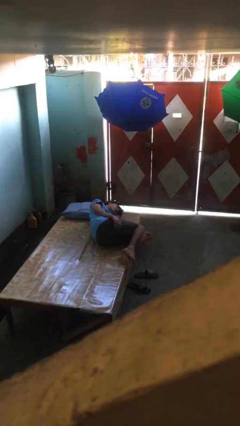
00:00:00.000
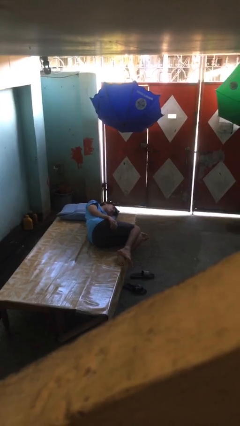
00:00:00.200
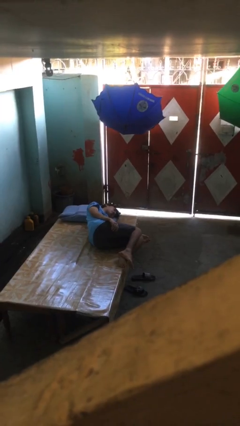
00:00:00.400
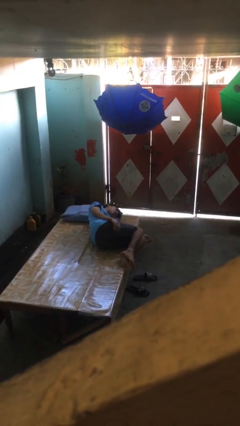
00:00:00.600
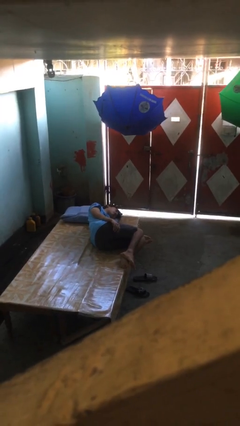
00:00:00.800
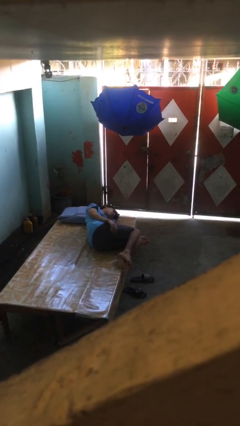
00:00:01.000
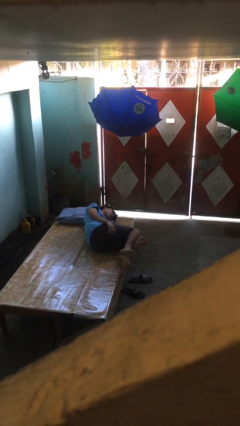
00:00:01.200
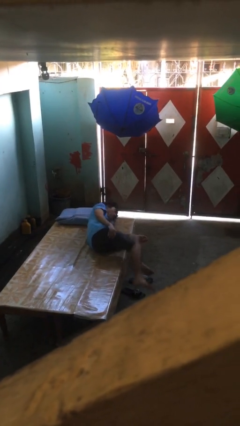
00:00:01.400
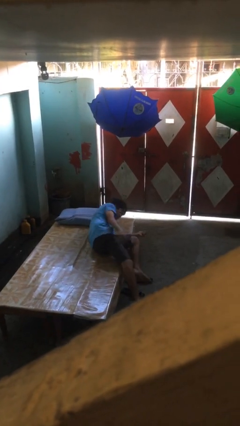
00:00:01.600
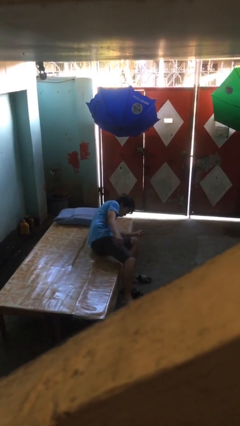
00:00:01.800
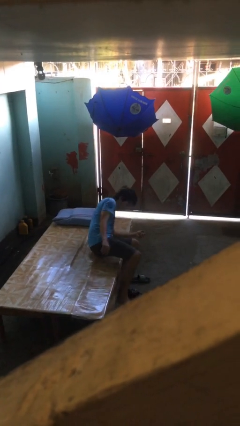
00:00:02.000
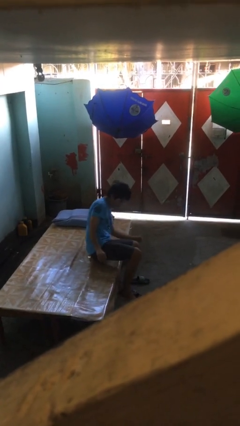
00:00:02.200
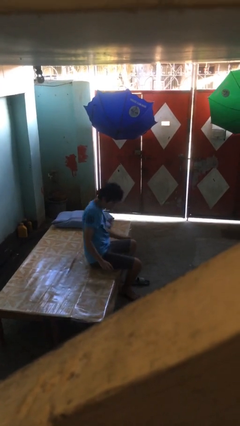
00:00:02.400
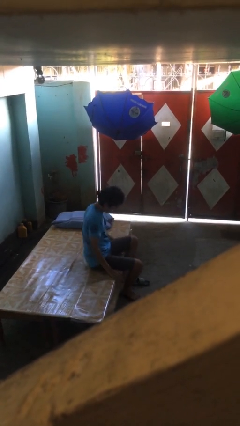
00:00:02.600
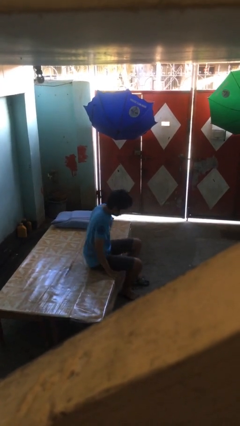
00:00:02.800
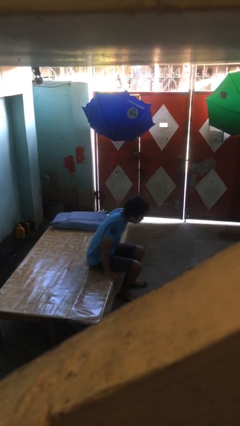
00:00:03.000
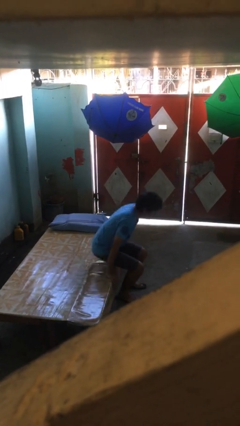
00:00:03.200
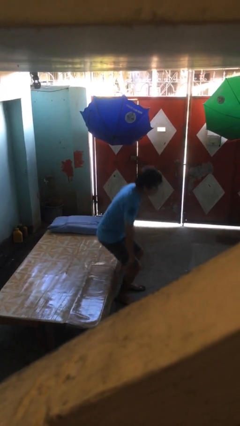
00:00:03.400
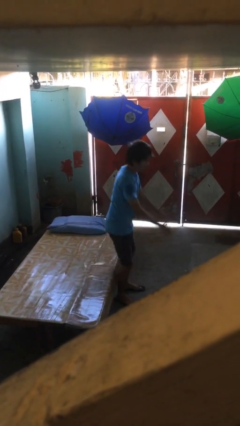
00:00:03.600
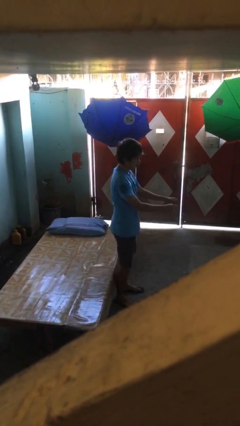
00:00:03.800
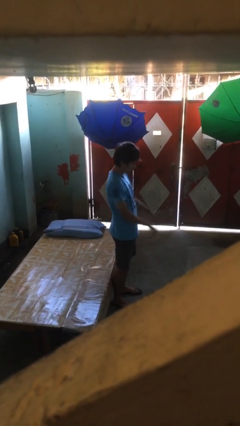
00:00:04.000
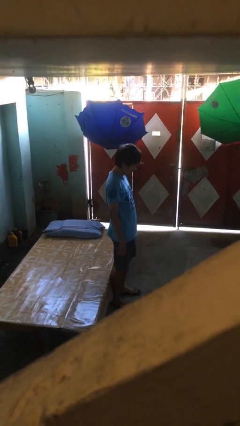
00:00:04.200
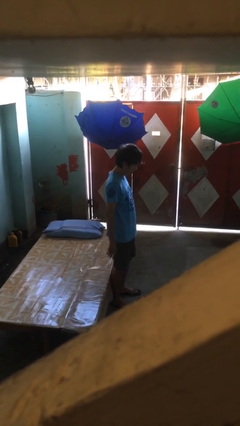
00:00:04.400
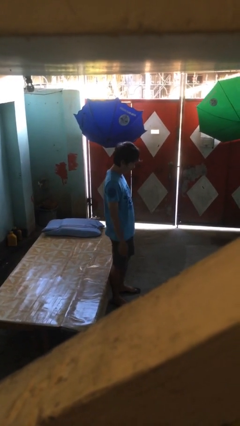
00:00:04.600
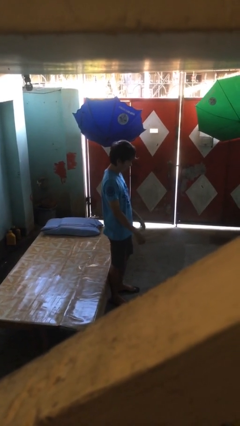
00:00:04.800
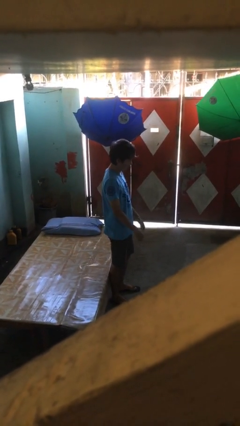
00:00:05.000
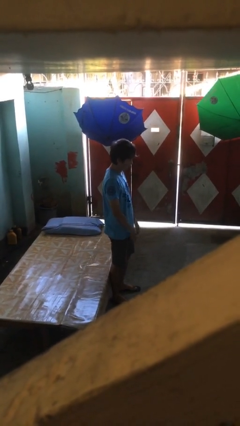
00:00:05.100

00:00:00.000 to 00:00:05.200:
person stands up

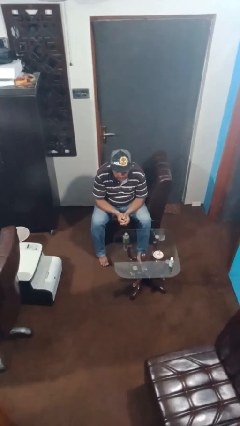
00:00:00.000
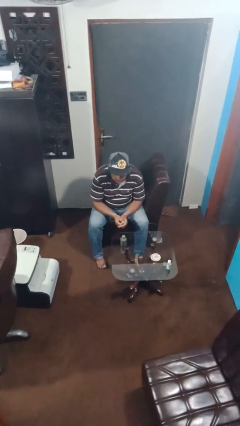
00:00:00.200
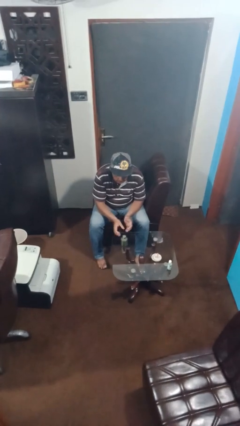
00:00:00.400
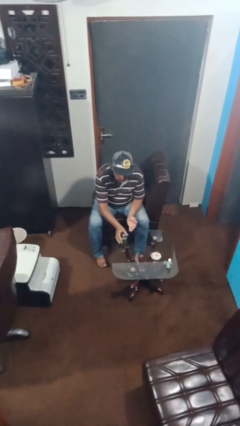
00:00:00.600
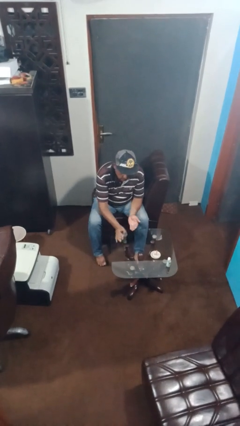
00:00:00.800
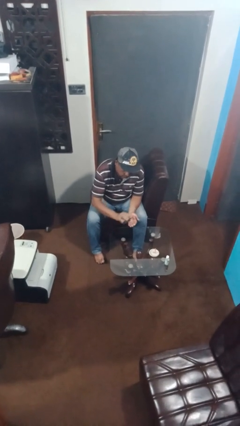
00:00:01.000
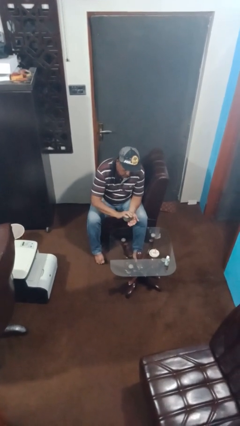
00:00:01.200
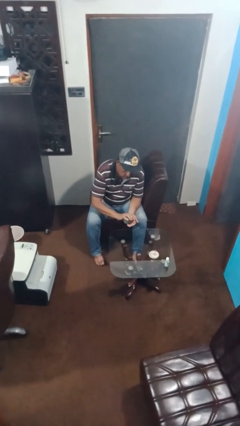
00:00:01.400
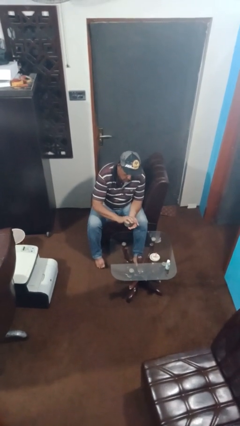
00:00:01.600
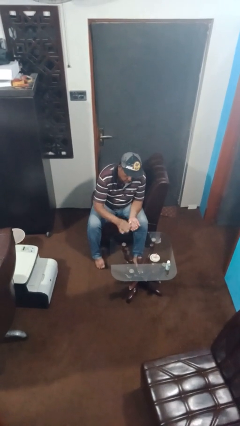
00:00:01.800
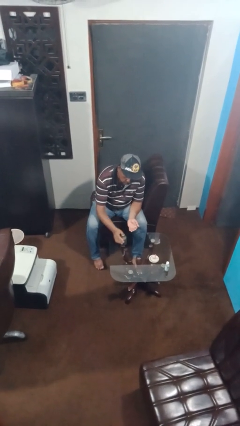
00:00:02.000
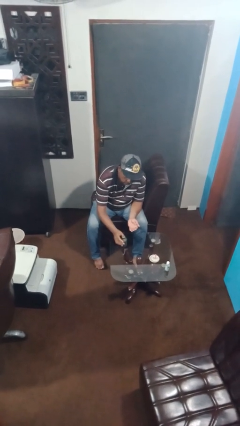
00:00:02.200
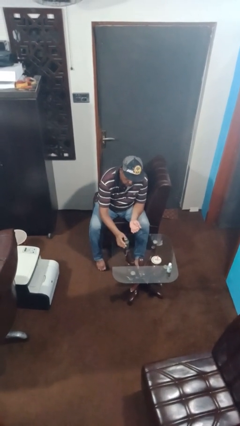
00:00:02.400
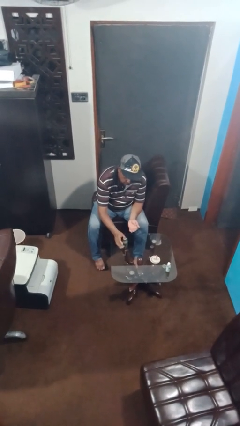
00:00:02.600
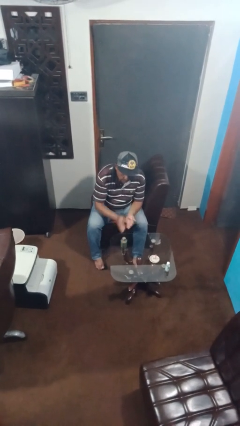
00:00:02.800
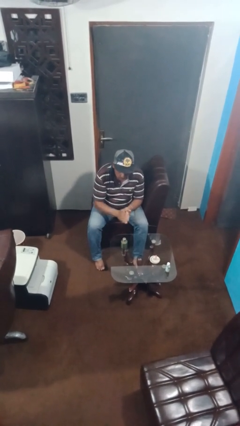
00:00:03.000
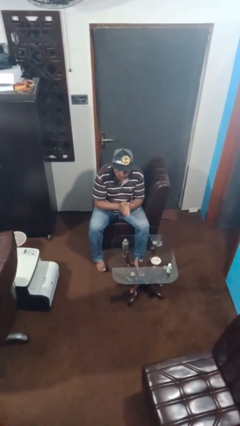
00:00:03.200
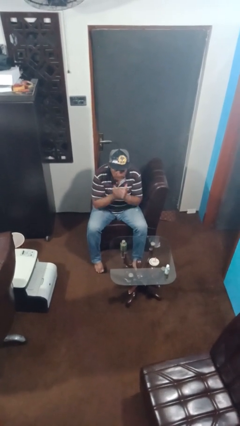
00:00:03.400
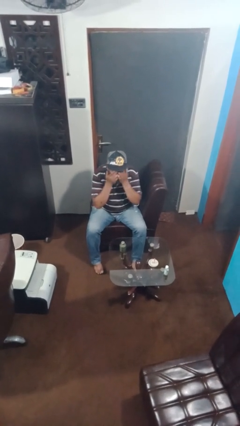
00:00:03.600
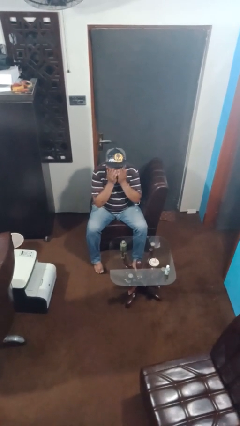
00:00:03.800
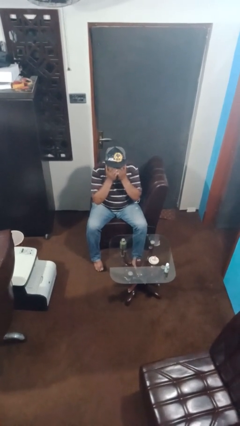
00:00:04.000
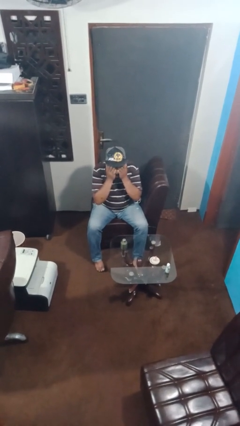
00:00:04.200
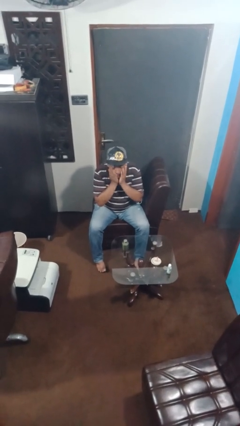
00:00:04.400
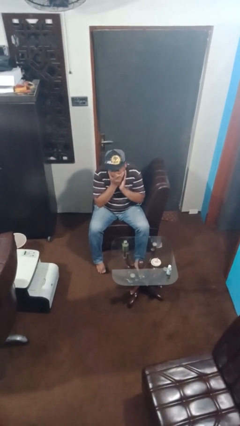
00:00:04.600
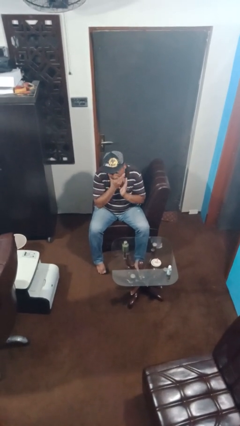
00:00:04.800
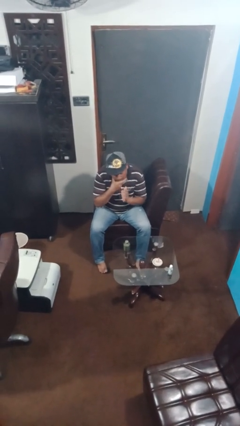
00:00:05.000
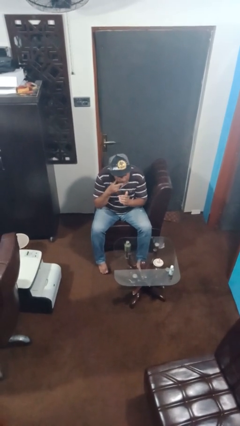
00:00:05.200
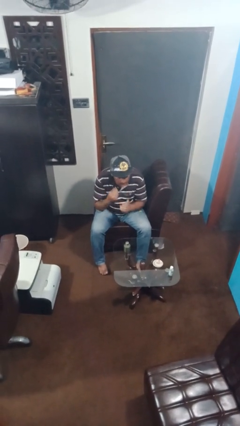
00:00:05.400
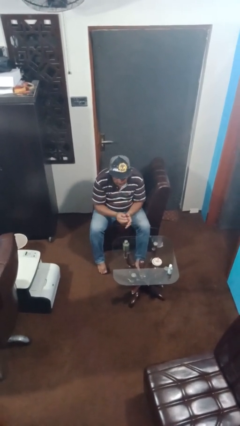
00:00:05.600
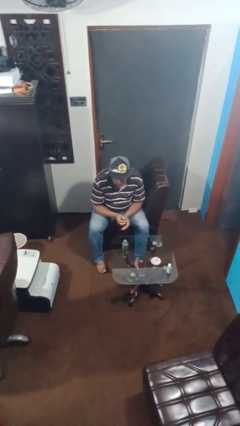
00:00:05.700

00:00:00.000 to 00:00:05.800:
person applies facial moisturizer

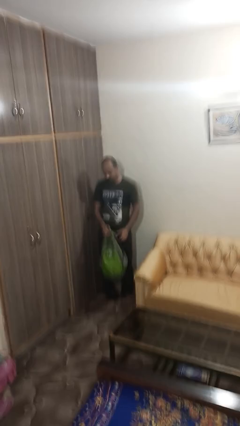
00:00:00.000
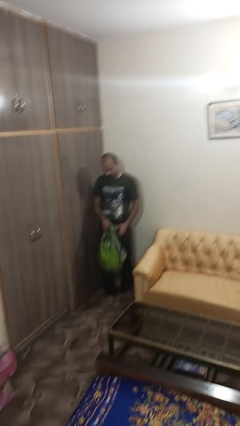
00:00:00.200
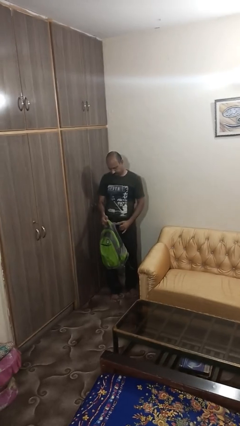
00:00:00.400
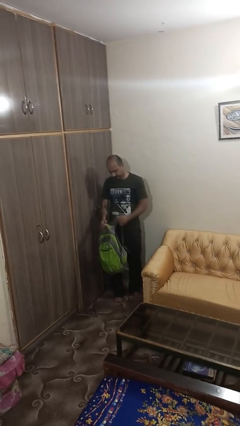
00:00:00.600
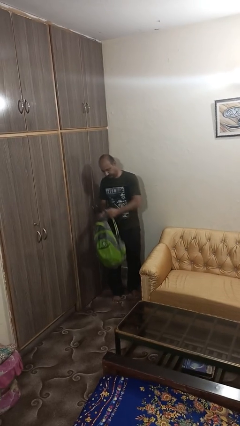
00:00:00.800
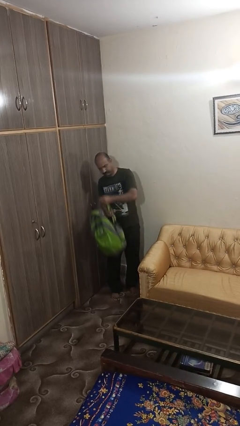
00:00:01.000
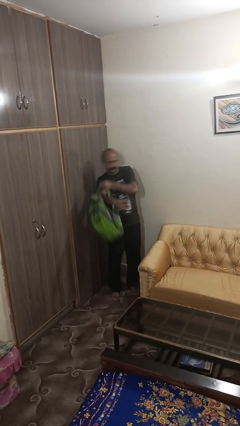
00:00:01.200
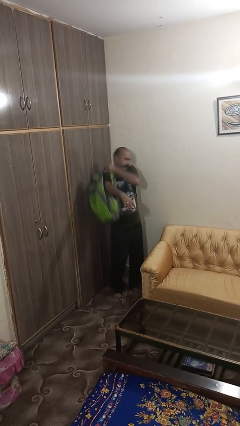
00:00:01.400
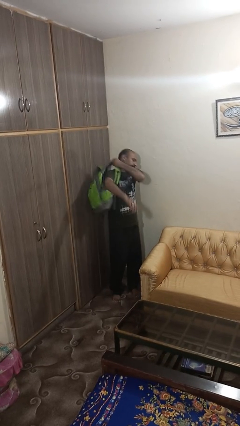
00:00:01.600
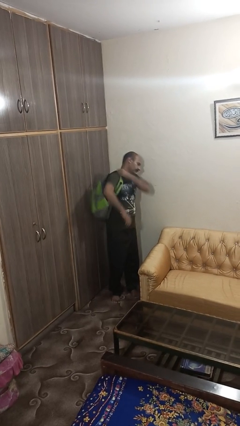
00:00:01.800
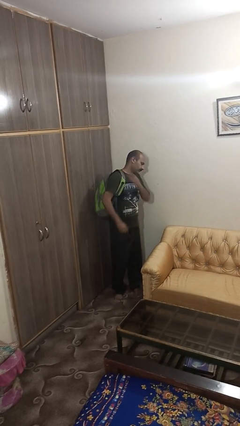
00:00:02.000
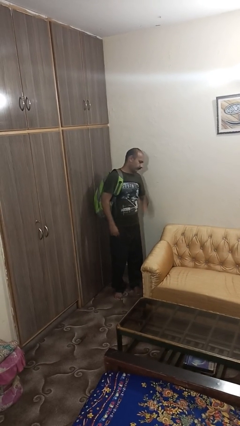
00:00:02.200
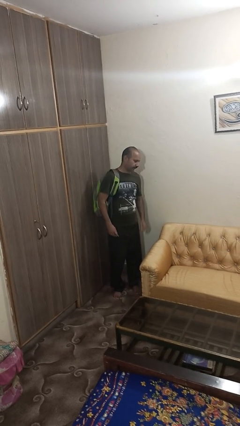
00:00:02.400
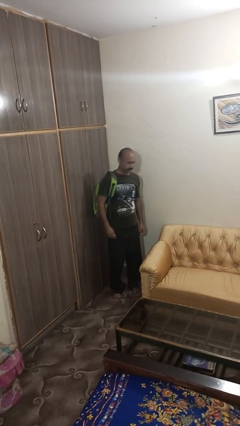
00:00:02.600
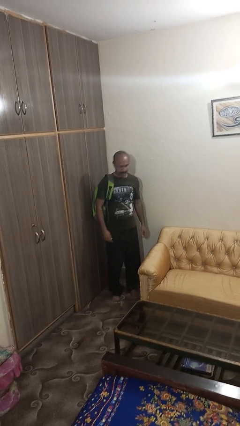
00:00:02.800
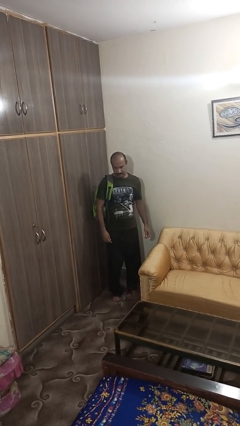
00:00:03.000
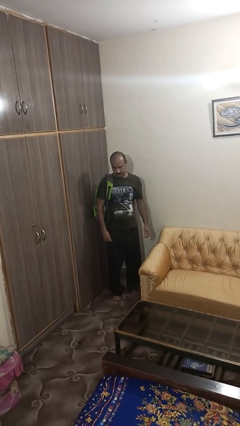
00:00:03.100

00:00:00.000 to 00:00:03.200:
person puts on backpack

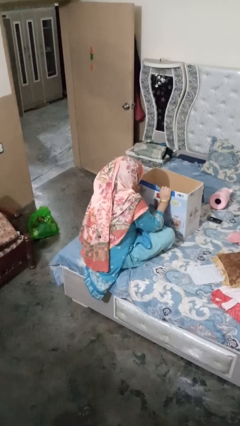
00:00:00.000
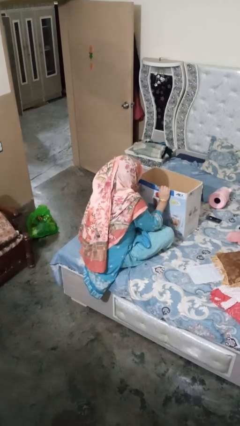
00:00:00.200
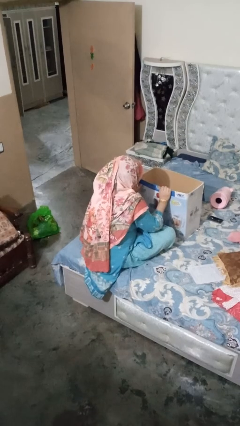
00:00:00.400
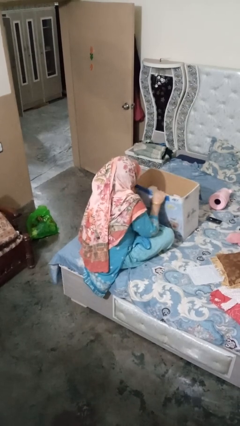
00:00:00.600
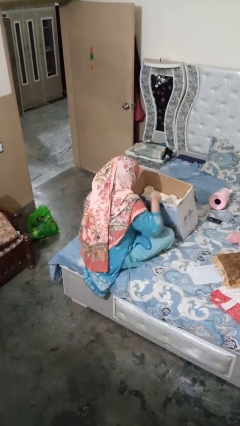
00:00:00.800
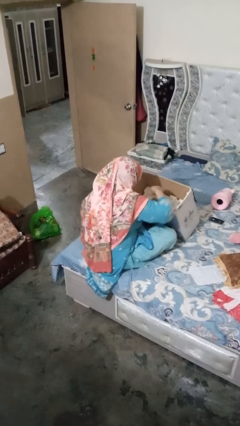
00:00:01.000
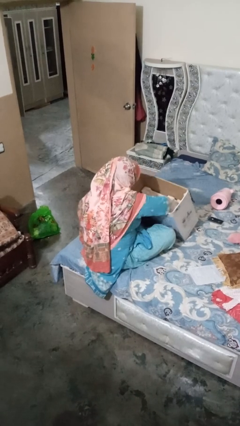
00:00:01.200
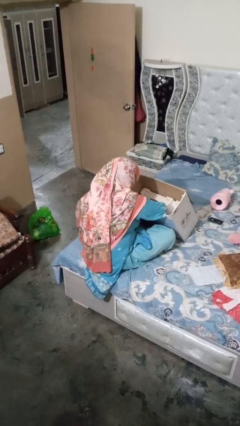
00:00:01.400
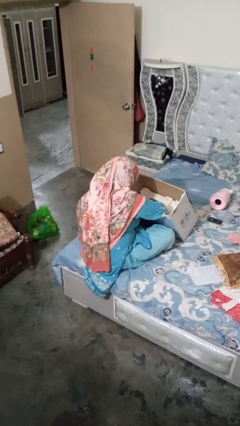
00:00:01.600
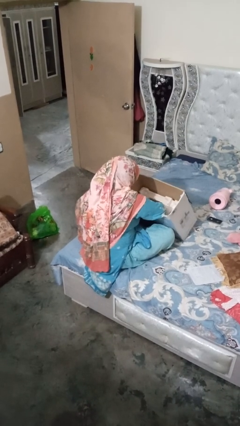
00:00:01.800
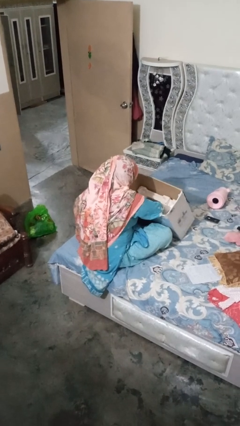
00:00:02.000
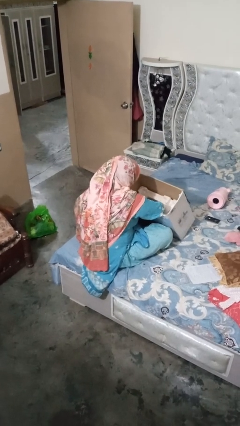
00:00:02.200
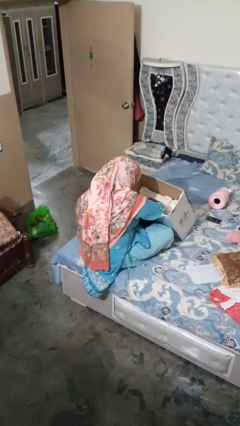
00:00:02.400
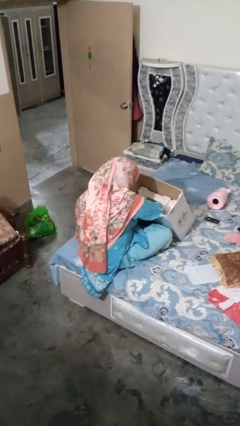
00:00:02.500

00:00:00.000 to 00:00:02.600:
person searches in box

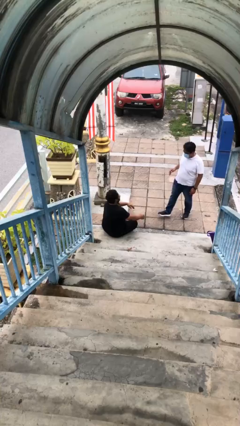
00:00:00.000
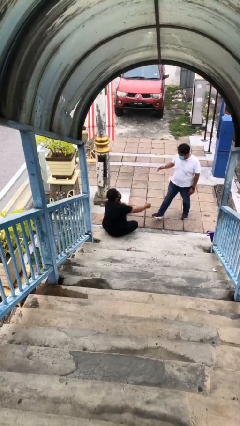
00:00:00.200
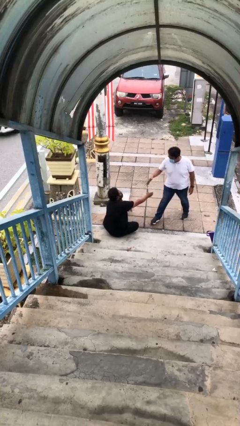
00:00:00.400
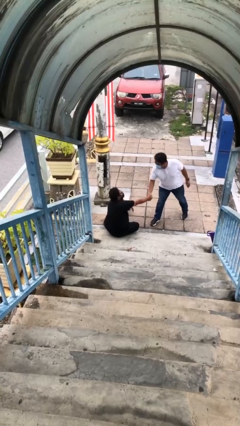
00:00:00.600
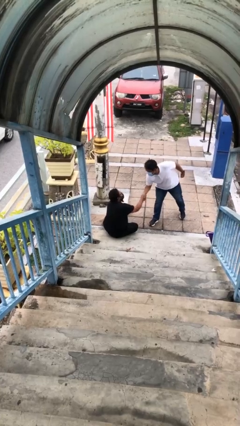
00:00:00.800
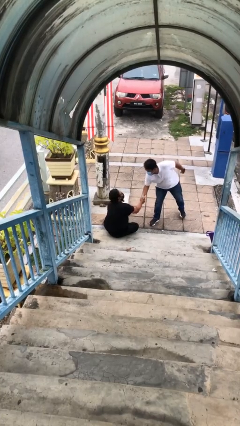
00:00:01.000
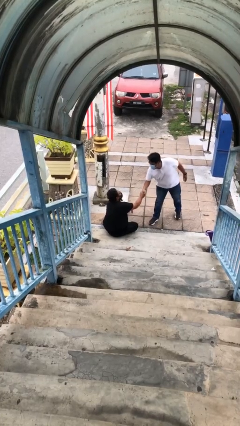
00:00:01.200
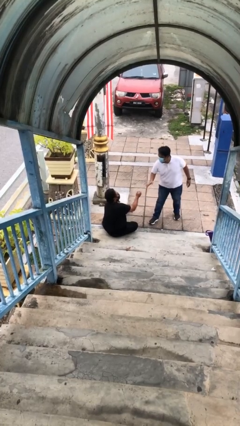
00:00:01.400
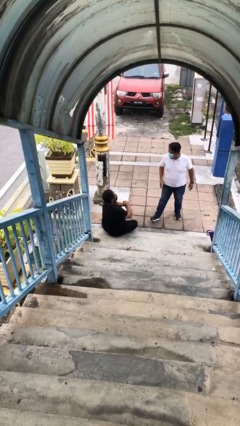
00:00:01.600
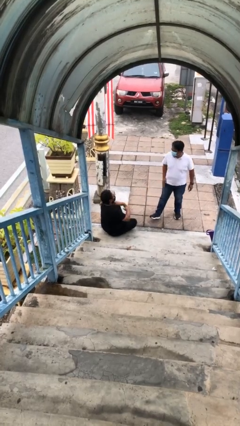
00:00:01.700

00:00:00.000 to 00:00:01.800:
person shakes hand
